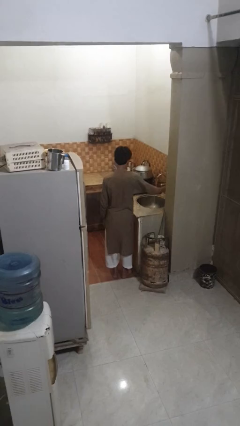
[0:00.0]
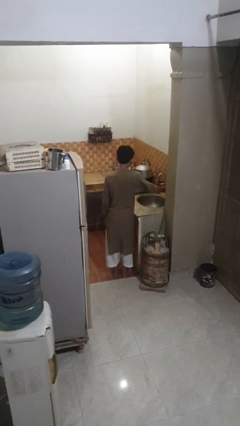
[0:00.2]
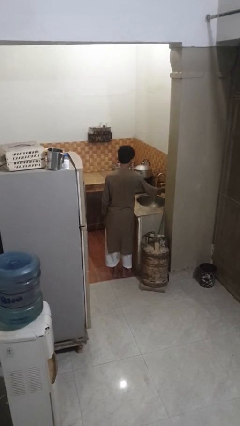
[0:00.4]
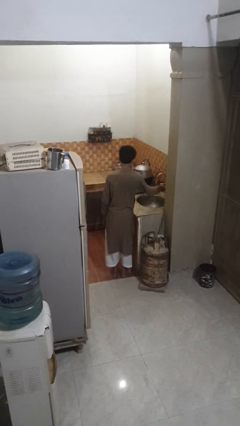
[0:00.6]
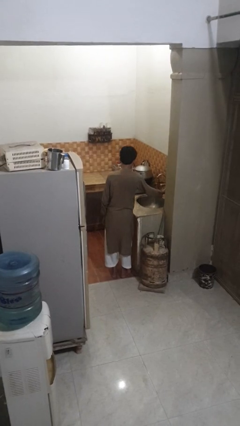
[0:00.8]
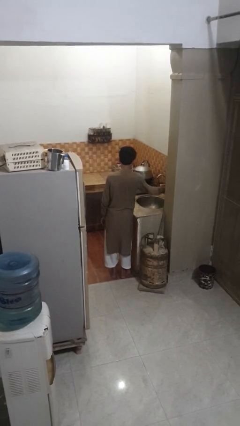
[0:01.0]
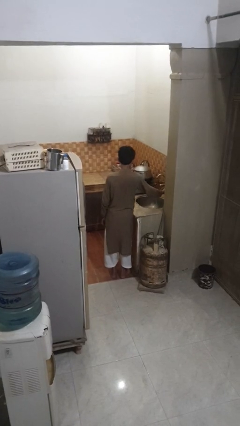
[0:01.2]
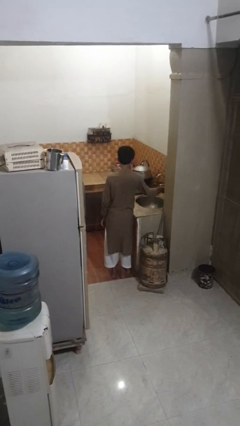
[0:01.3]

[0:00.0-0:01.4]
person turns off faucet

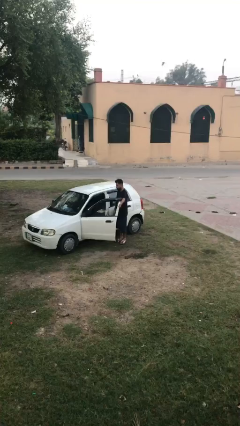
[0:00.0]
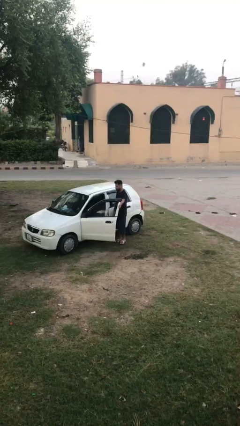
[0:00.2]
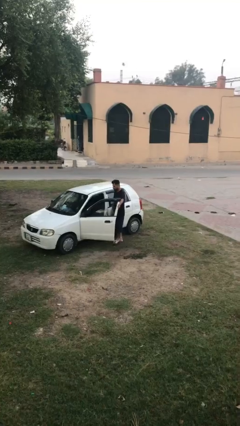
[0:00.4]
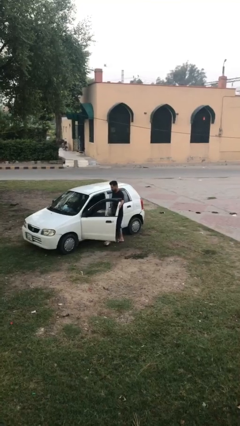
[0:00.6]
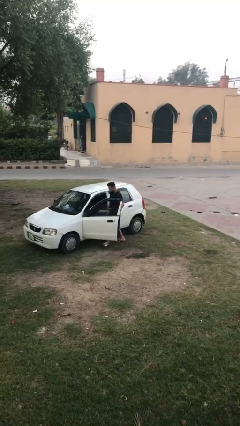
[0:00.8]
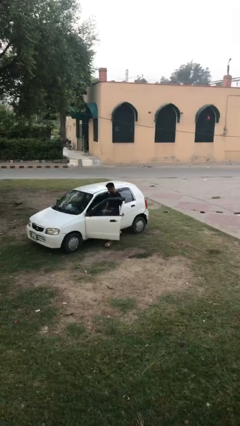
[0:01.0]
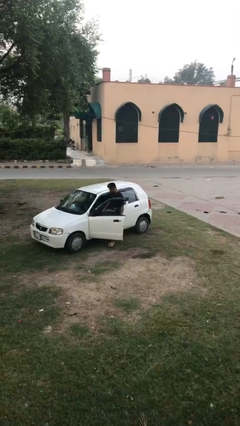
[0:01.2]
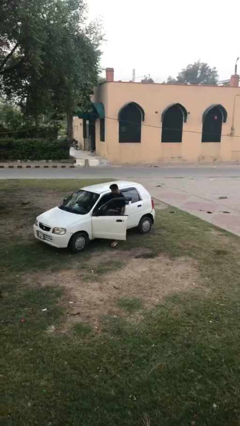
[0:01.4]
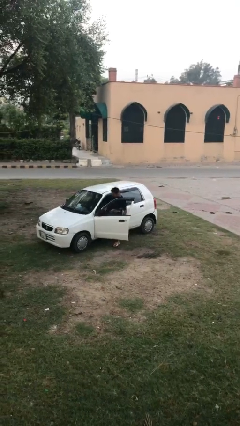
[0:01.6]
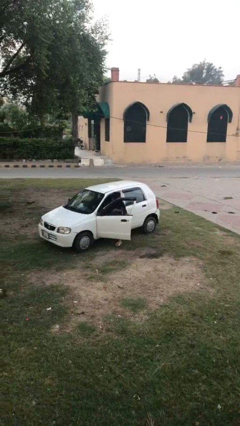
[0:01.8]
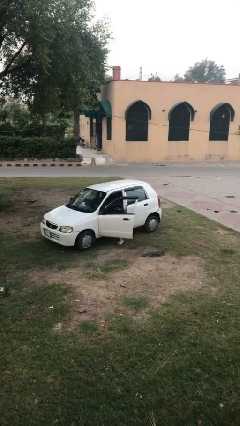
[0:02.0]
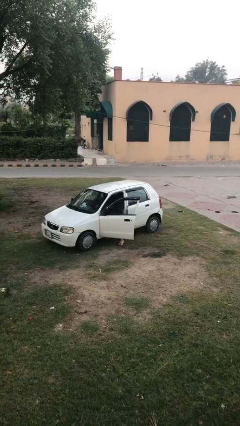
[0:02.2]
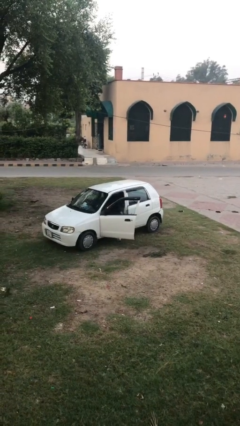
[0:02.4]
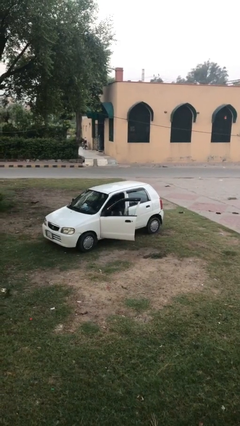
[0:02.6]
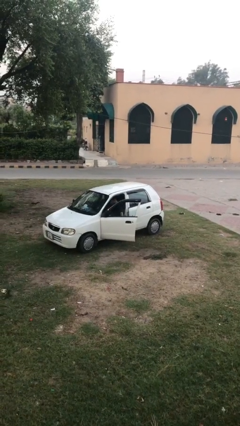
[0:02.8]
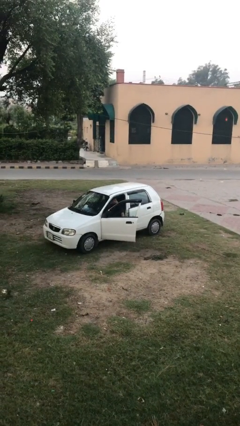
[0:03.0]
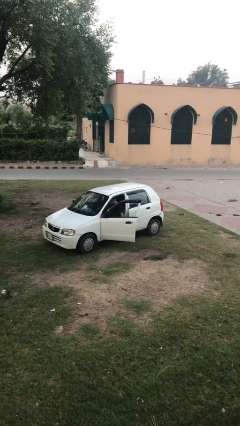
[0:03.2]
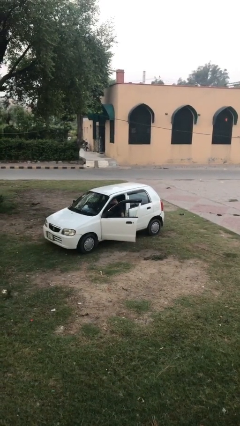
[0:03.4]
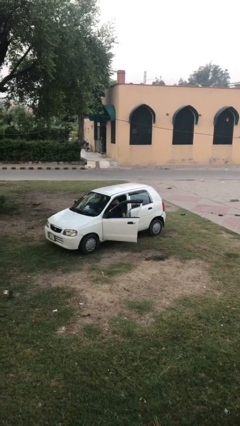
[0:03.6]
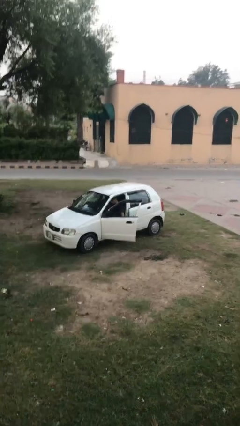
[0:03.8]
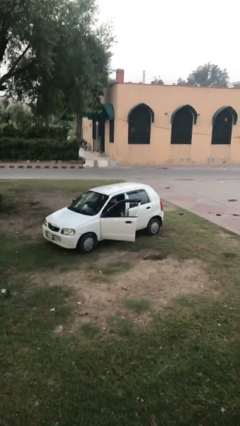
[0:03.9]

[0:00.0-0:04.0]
person enters car

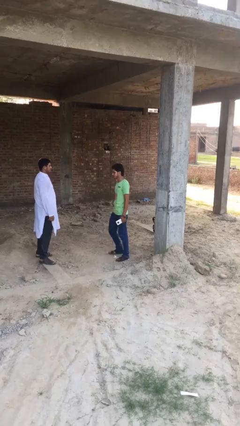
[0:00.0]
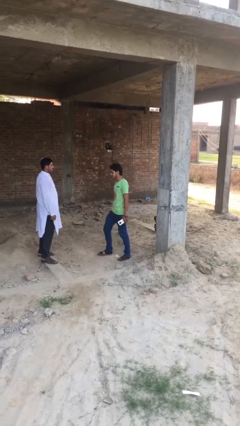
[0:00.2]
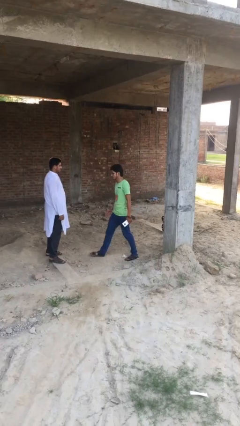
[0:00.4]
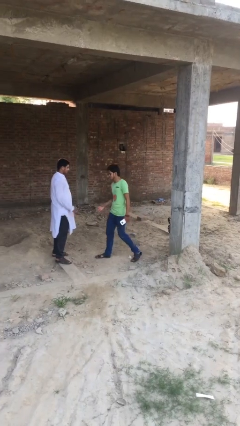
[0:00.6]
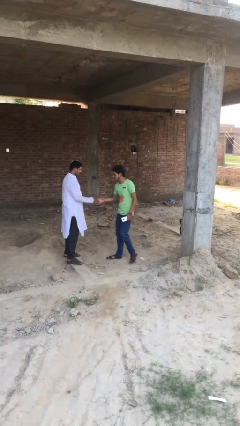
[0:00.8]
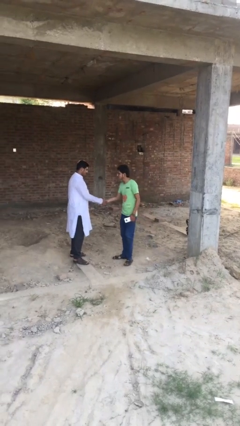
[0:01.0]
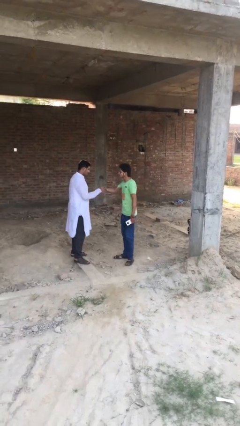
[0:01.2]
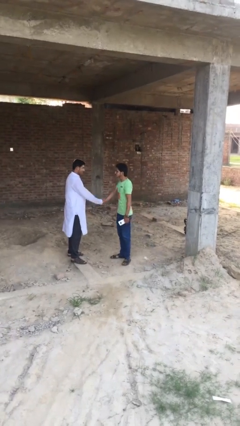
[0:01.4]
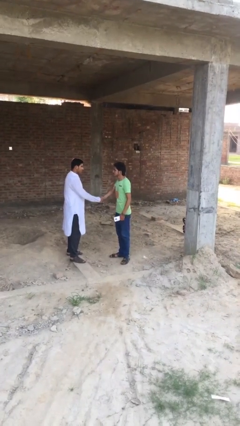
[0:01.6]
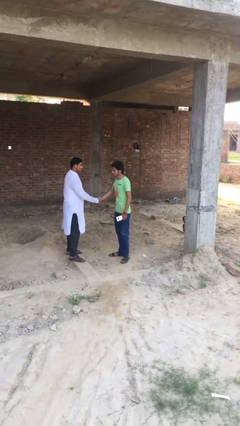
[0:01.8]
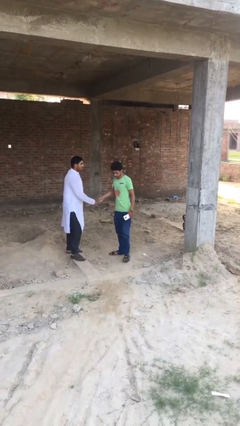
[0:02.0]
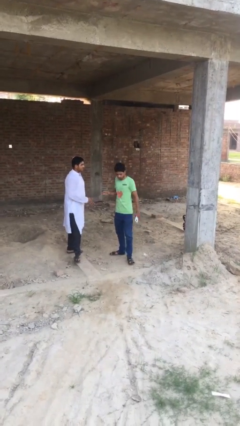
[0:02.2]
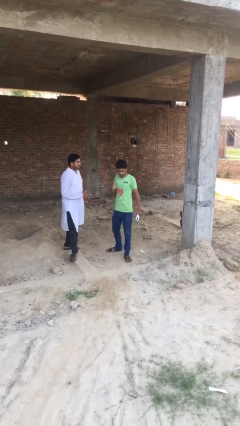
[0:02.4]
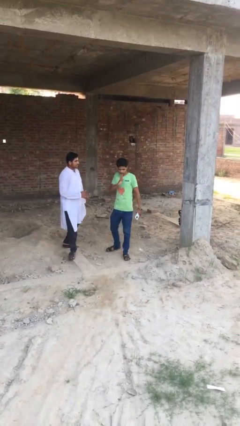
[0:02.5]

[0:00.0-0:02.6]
person shakes hand

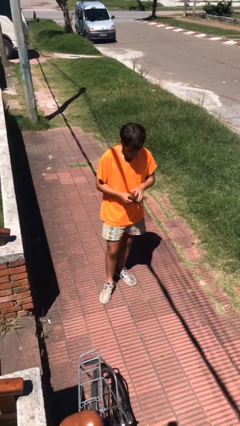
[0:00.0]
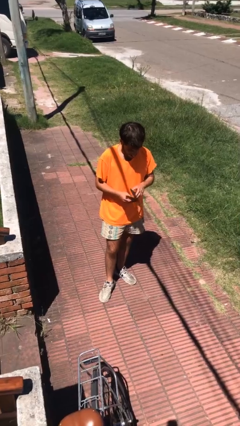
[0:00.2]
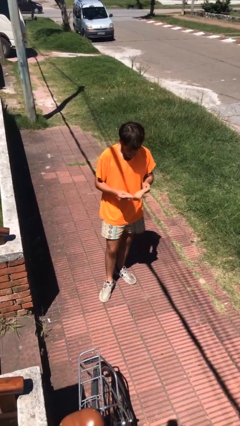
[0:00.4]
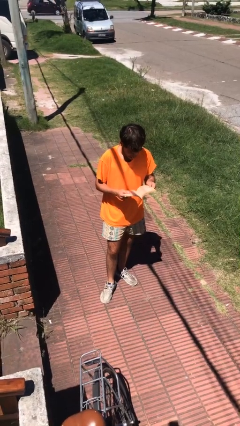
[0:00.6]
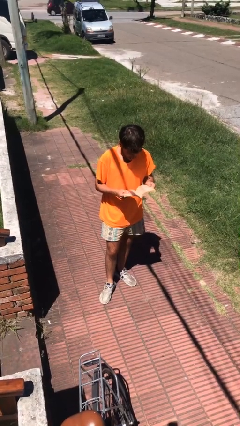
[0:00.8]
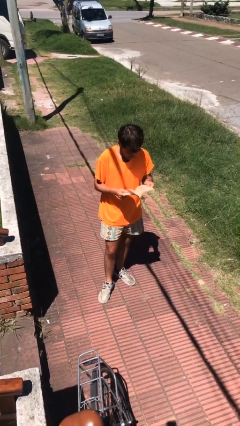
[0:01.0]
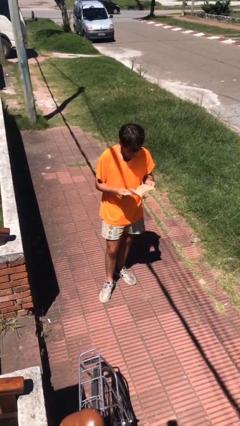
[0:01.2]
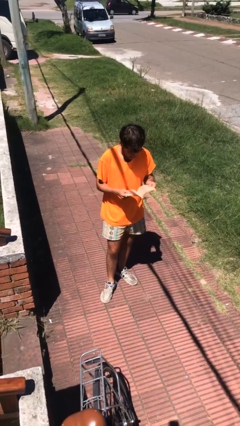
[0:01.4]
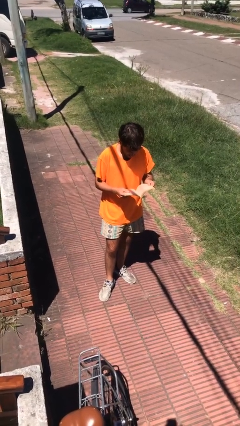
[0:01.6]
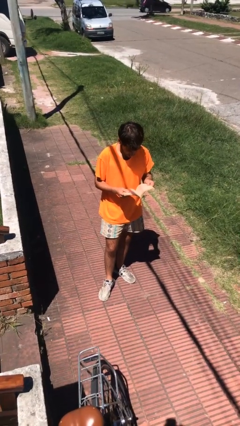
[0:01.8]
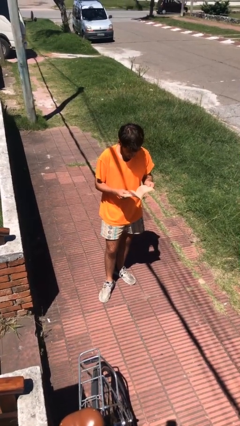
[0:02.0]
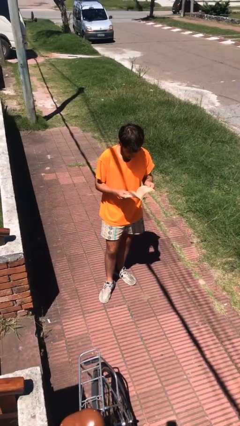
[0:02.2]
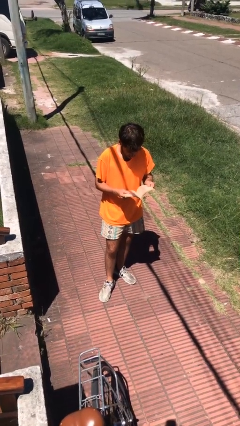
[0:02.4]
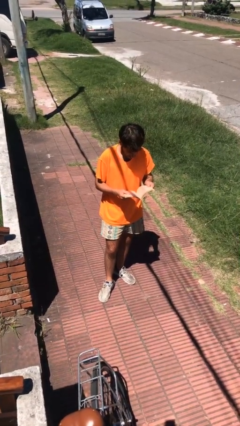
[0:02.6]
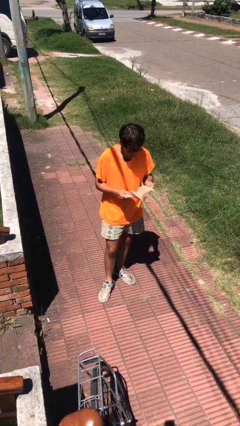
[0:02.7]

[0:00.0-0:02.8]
person reads document

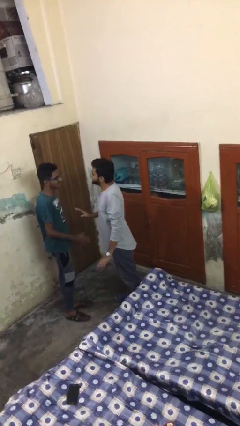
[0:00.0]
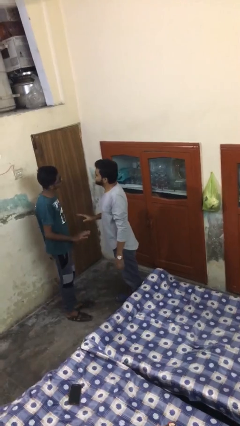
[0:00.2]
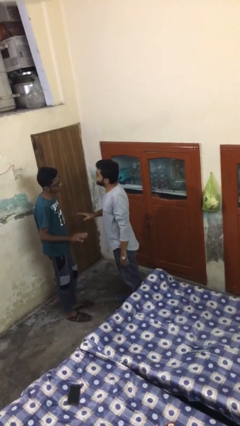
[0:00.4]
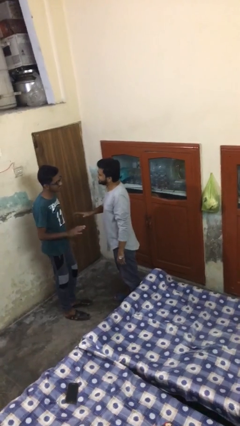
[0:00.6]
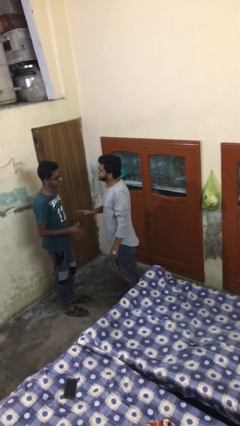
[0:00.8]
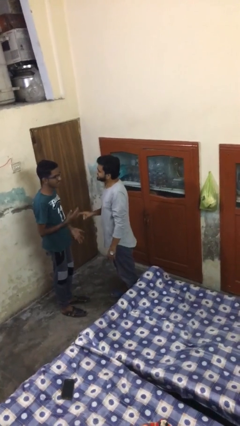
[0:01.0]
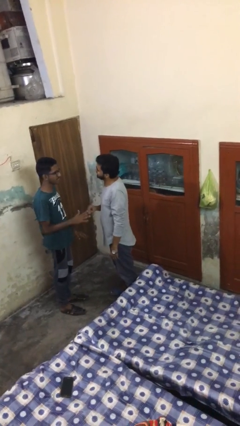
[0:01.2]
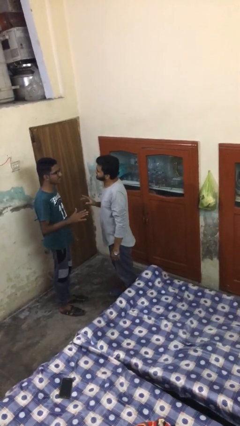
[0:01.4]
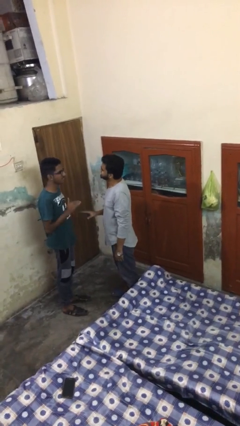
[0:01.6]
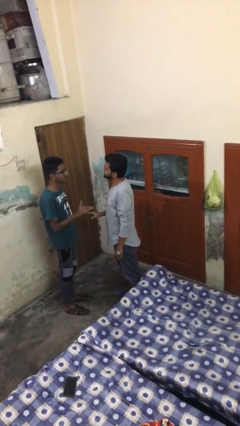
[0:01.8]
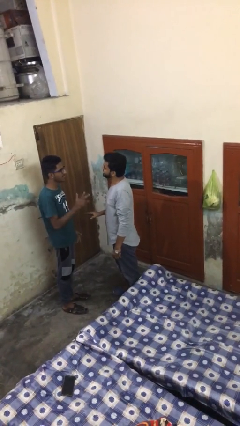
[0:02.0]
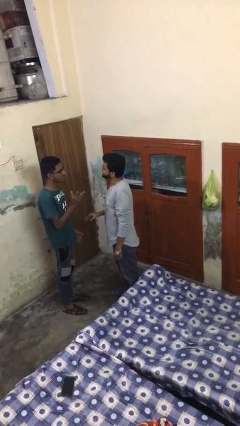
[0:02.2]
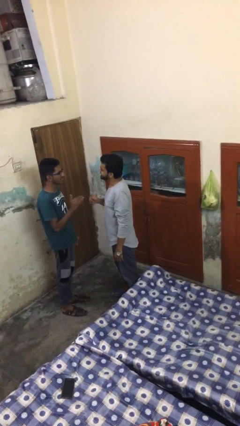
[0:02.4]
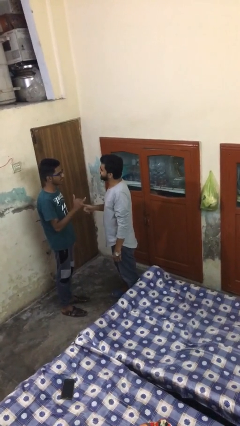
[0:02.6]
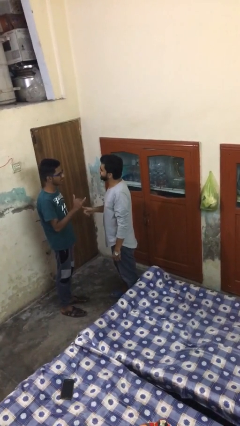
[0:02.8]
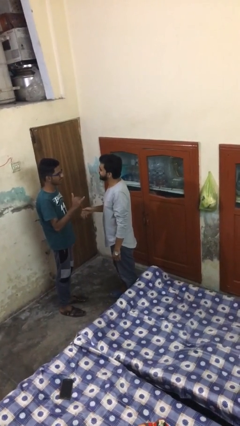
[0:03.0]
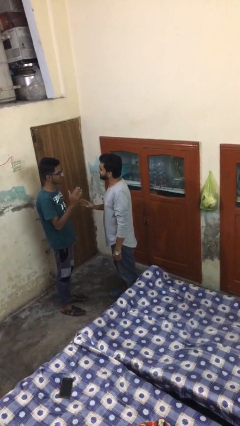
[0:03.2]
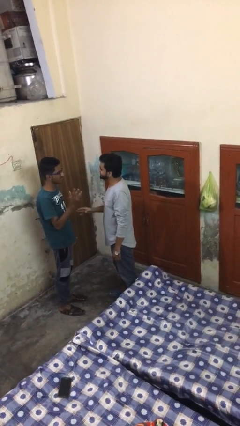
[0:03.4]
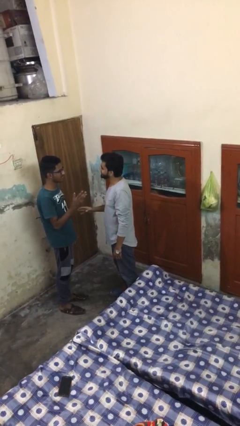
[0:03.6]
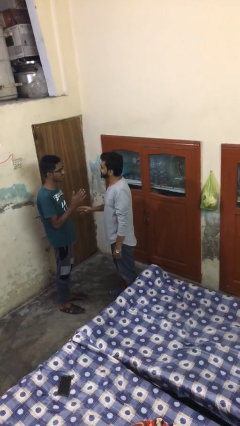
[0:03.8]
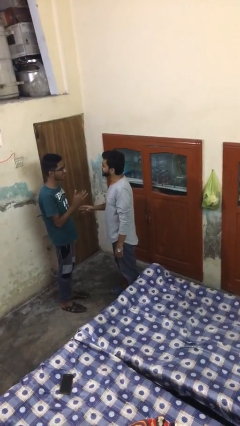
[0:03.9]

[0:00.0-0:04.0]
person talks to person

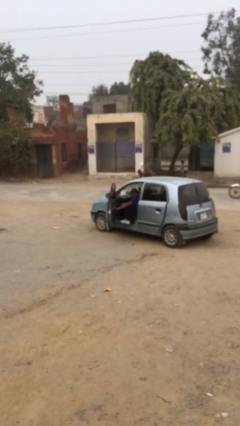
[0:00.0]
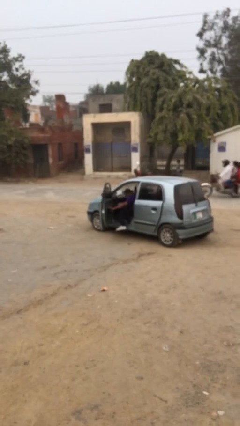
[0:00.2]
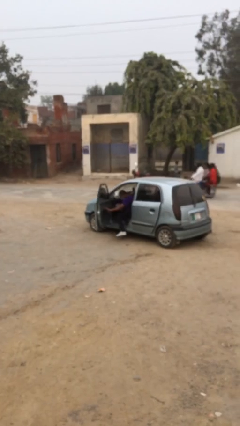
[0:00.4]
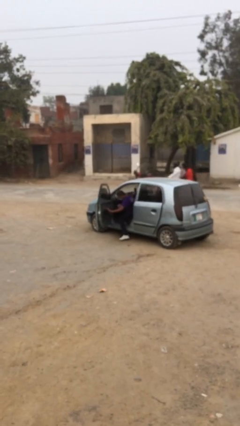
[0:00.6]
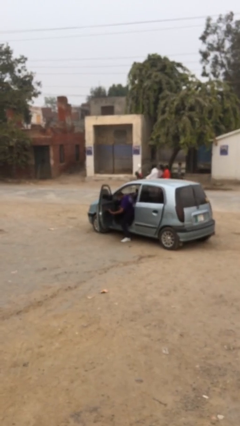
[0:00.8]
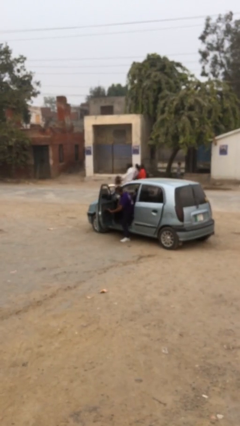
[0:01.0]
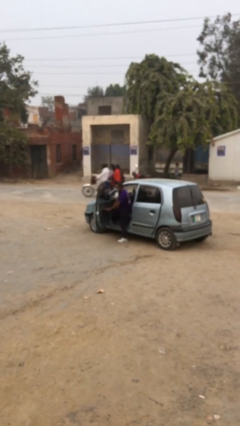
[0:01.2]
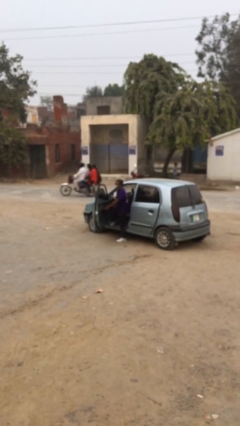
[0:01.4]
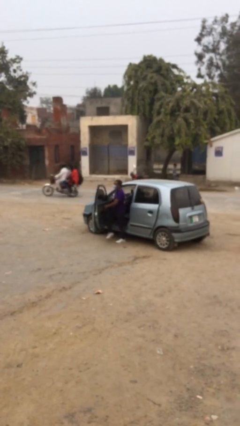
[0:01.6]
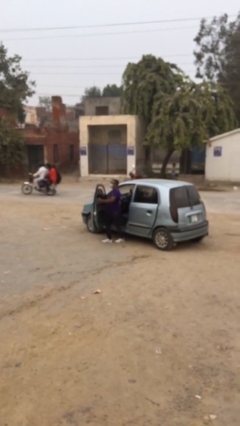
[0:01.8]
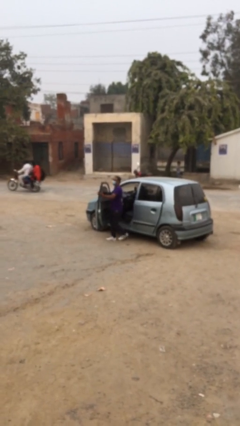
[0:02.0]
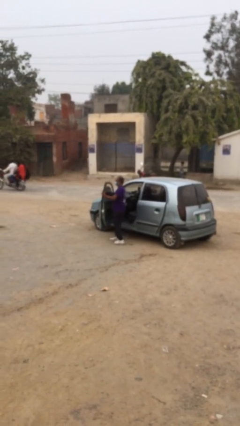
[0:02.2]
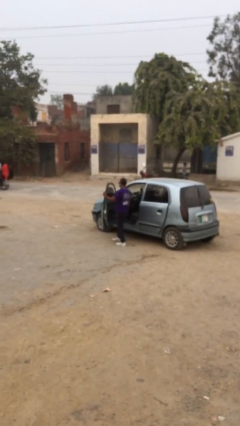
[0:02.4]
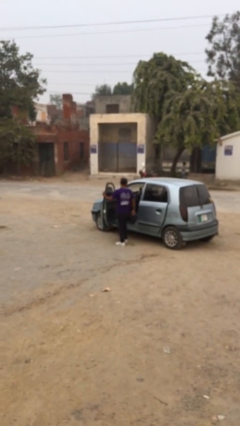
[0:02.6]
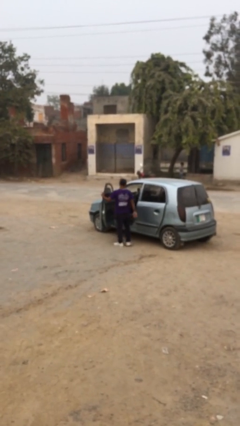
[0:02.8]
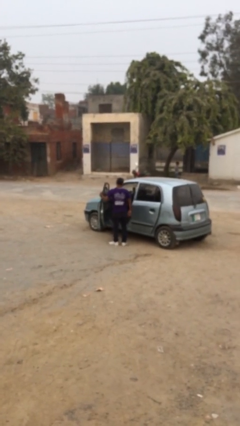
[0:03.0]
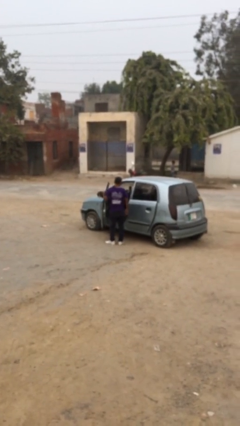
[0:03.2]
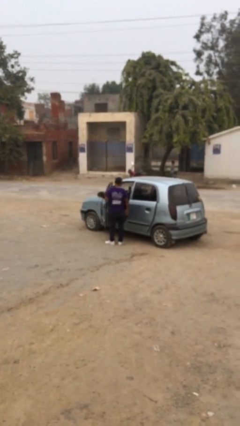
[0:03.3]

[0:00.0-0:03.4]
person exits car
